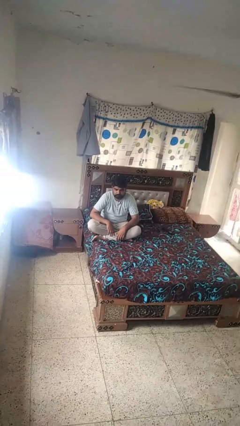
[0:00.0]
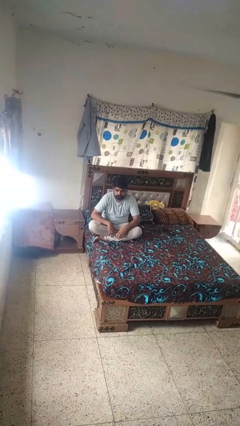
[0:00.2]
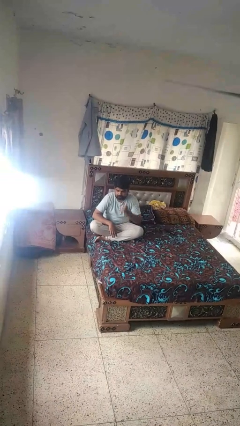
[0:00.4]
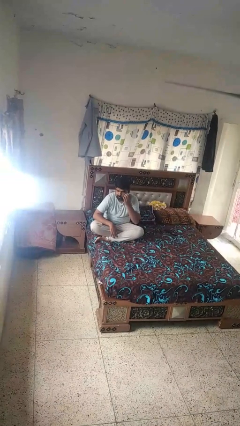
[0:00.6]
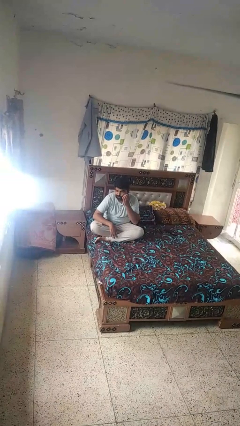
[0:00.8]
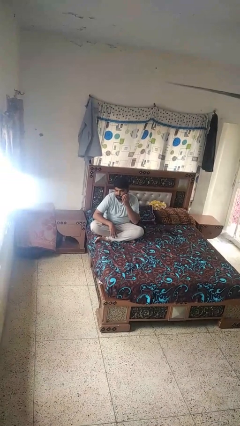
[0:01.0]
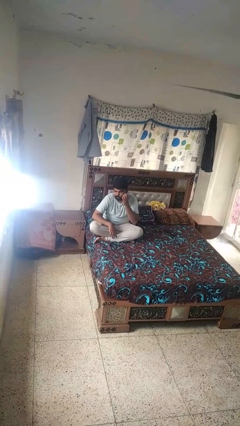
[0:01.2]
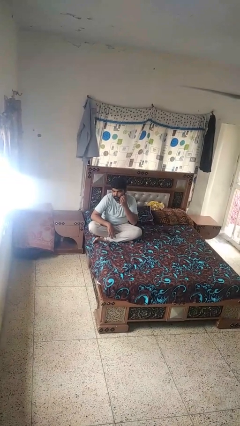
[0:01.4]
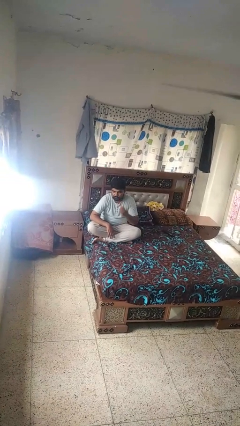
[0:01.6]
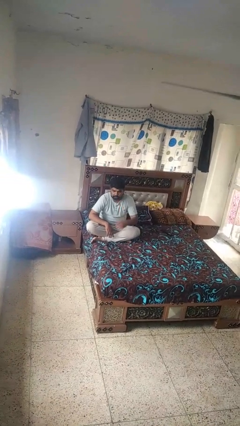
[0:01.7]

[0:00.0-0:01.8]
person scratches face

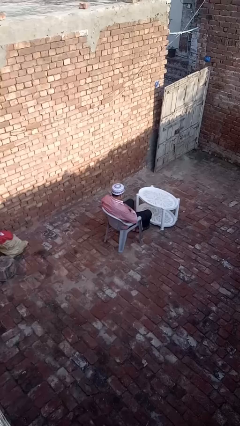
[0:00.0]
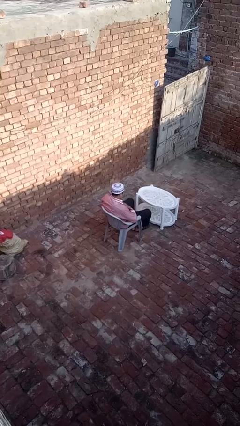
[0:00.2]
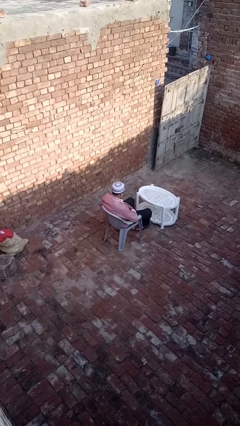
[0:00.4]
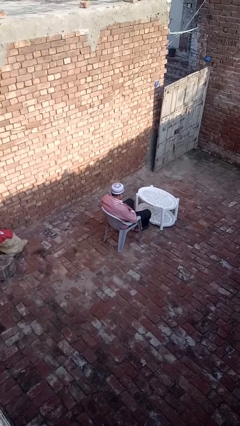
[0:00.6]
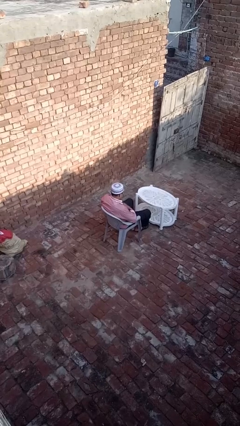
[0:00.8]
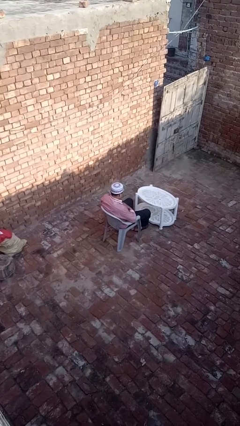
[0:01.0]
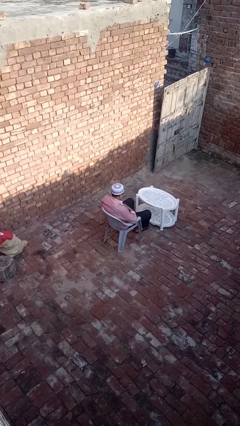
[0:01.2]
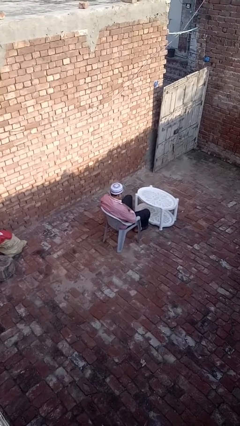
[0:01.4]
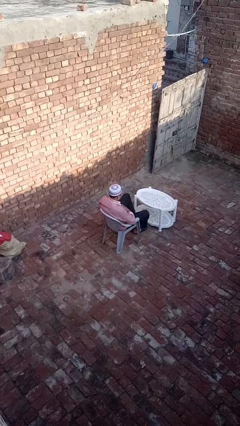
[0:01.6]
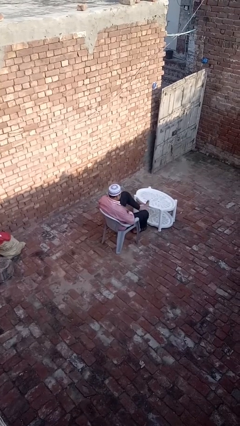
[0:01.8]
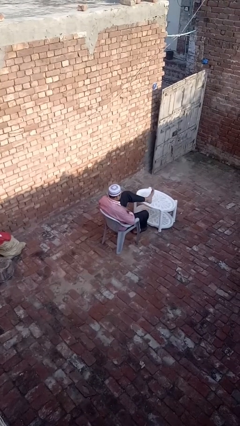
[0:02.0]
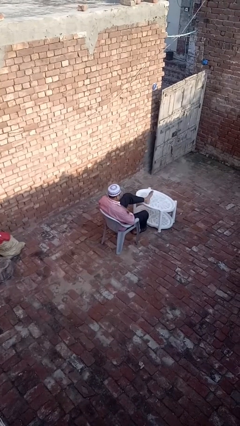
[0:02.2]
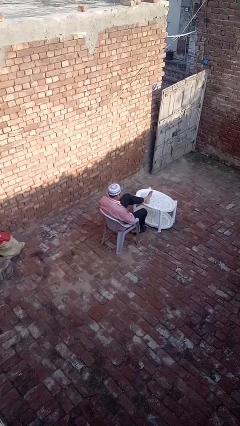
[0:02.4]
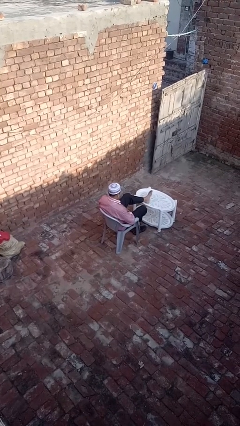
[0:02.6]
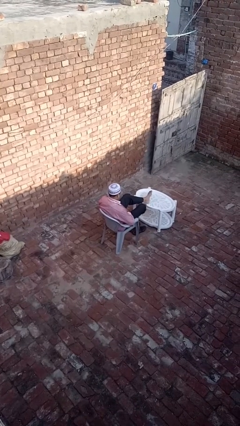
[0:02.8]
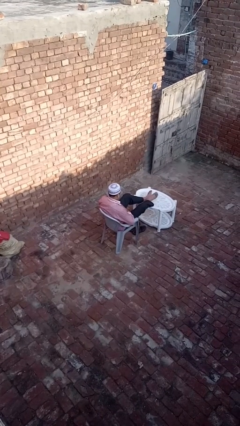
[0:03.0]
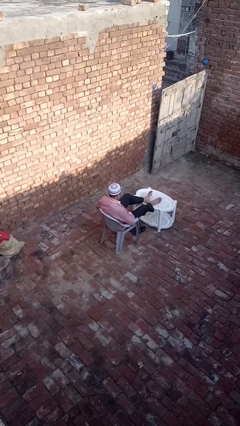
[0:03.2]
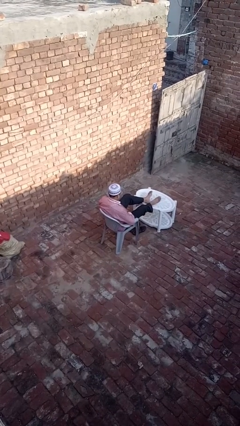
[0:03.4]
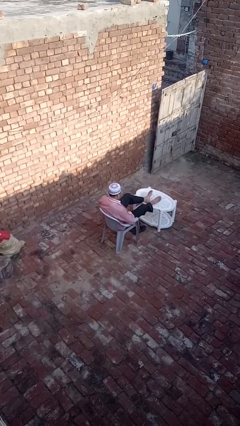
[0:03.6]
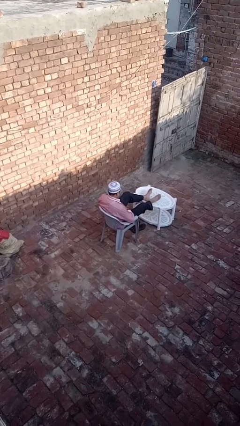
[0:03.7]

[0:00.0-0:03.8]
person puts feet up

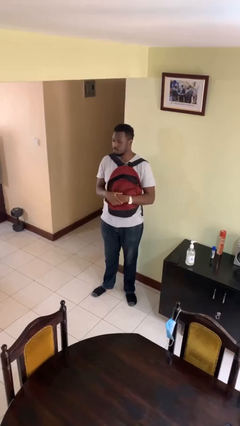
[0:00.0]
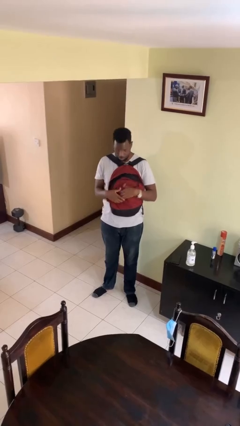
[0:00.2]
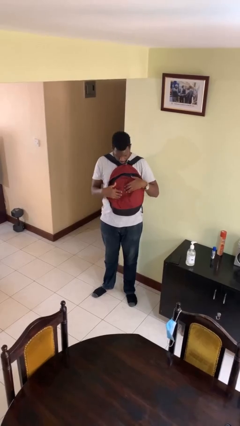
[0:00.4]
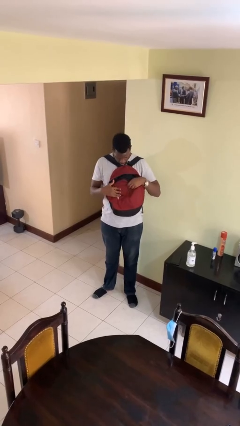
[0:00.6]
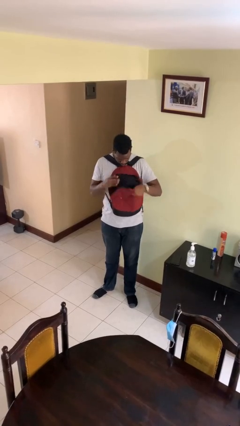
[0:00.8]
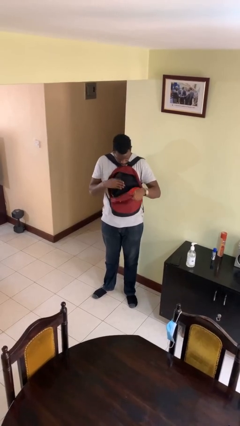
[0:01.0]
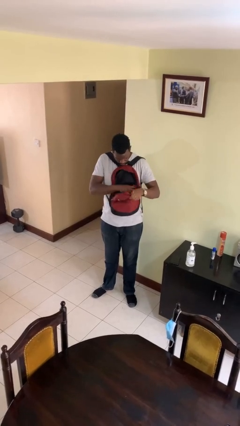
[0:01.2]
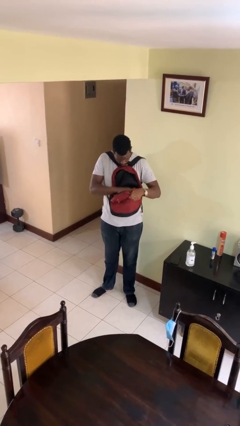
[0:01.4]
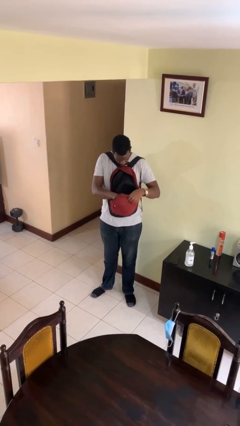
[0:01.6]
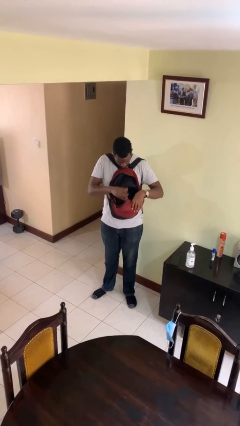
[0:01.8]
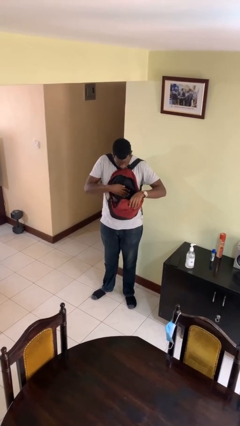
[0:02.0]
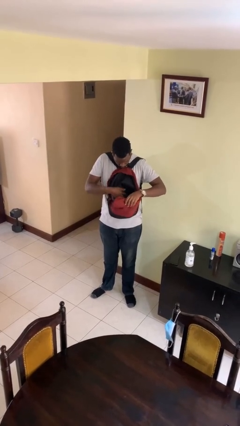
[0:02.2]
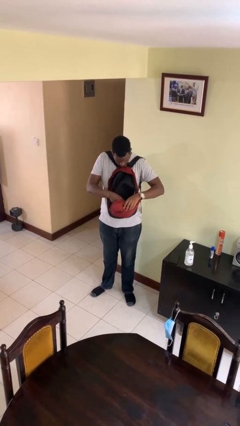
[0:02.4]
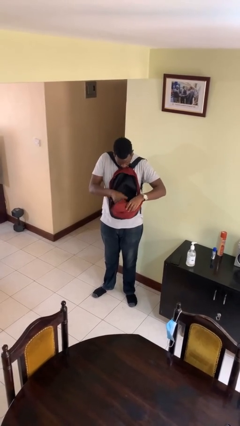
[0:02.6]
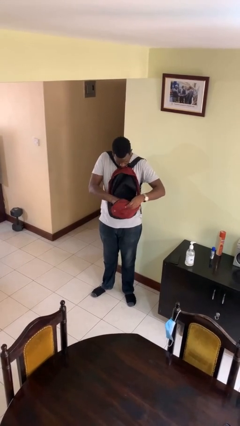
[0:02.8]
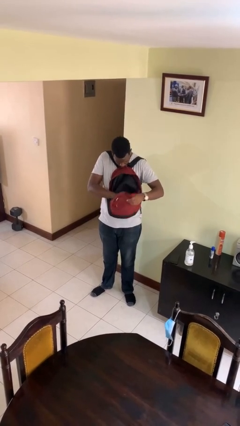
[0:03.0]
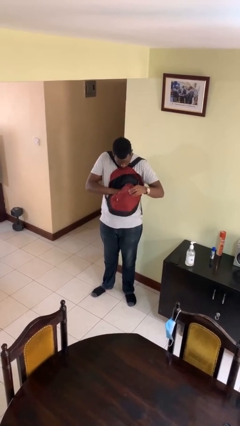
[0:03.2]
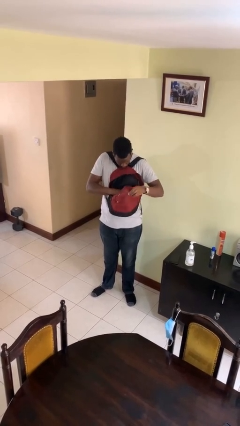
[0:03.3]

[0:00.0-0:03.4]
person searches in backpack

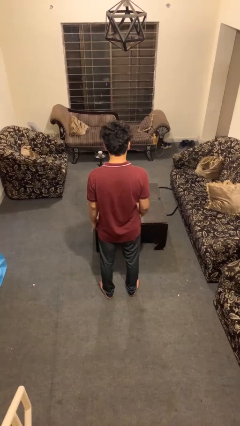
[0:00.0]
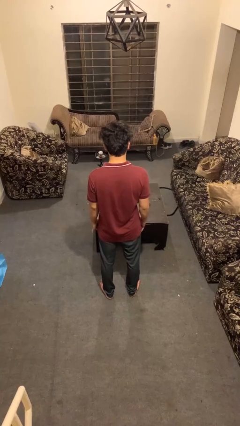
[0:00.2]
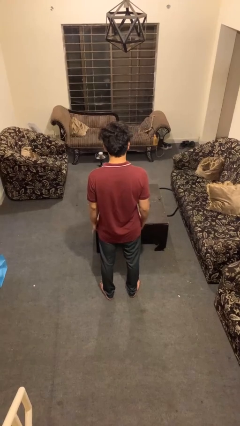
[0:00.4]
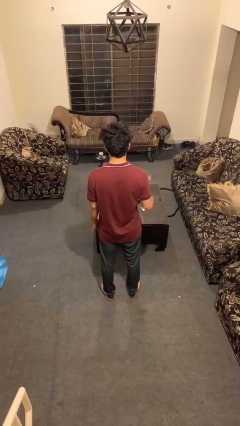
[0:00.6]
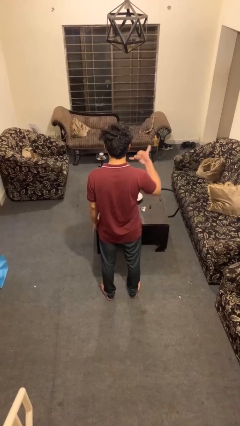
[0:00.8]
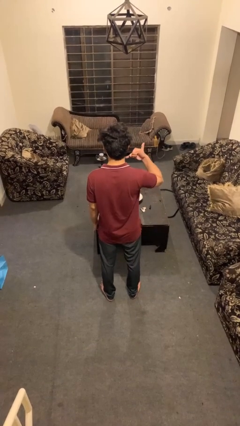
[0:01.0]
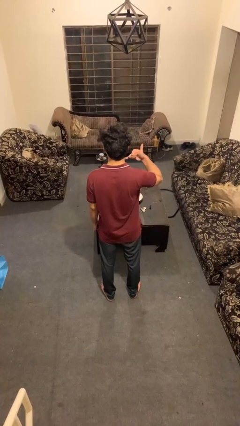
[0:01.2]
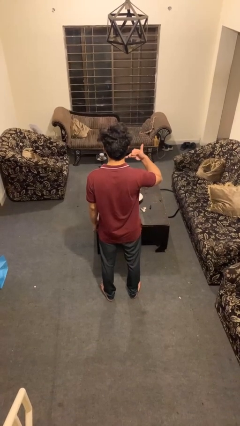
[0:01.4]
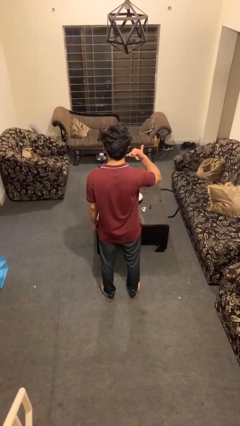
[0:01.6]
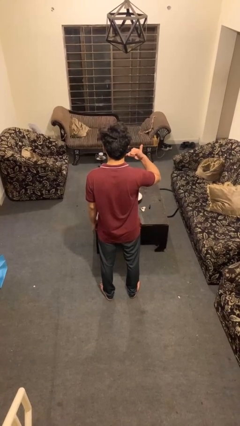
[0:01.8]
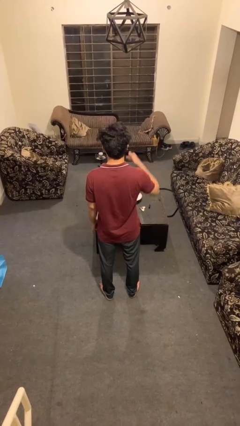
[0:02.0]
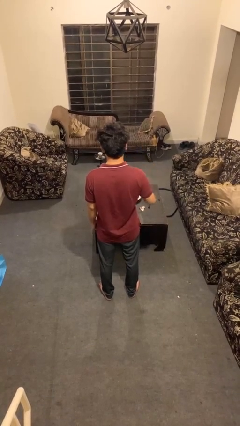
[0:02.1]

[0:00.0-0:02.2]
person gestures call me

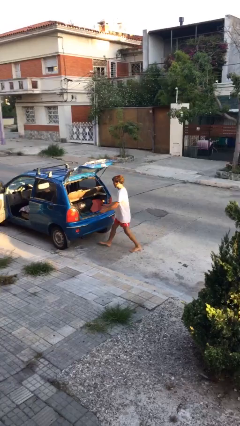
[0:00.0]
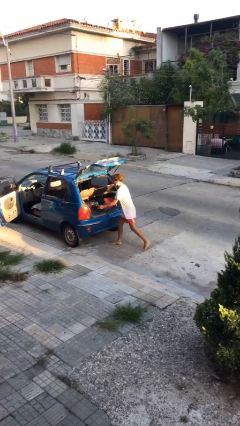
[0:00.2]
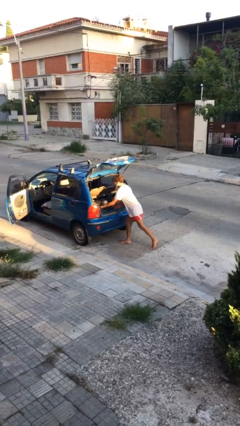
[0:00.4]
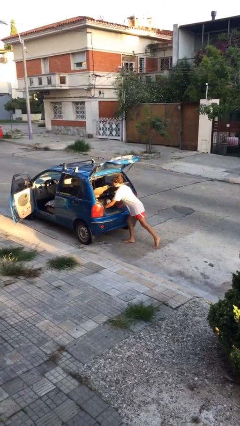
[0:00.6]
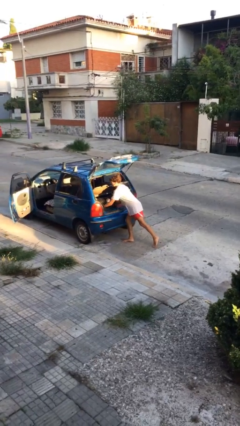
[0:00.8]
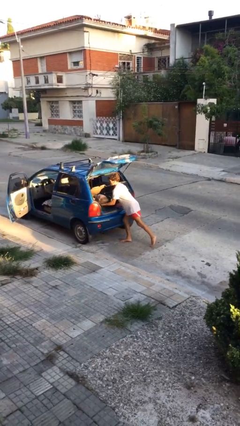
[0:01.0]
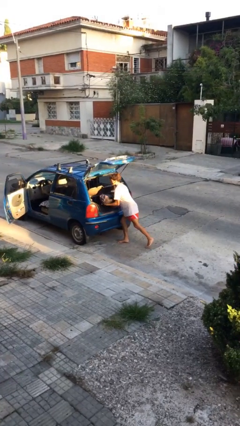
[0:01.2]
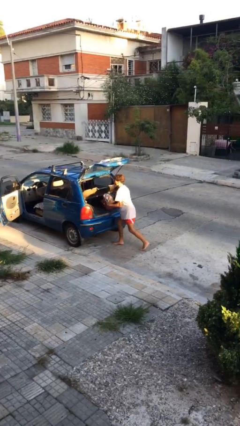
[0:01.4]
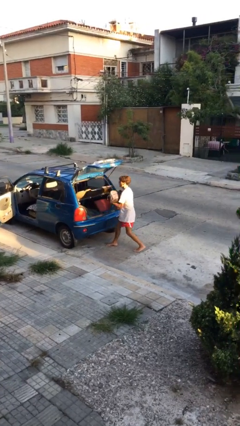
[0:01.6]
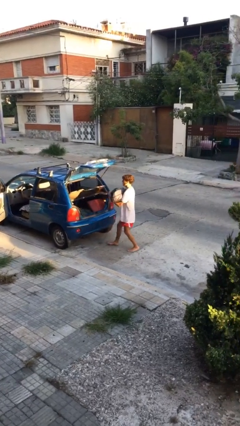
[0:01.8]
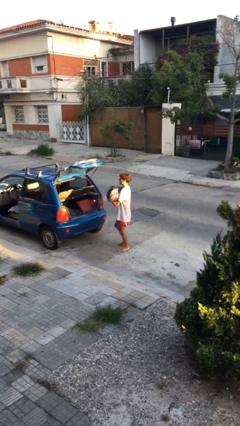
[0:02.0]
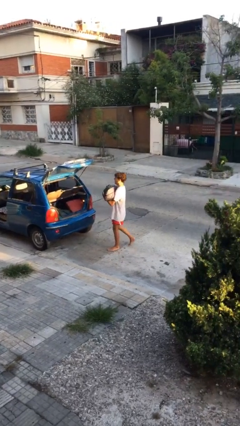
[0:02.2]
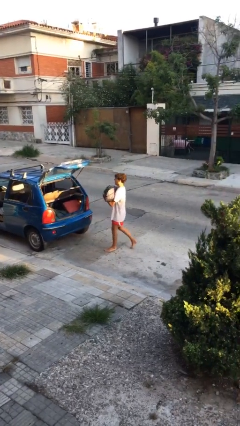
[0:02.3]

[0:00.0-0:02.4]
person unloads car

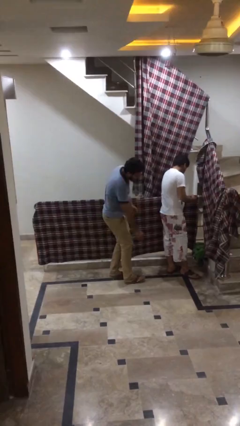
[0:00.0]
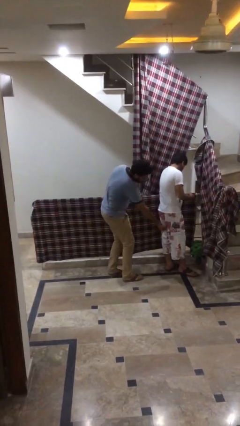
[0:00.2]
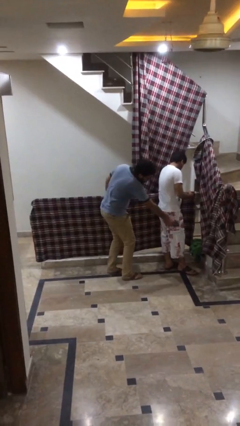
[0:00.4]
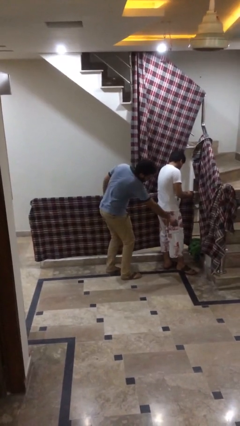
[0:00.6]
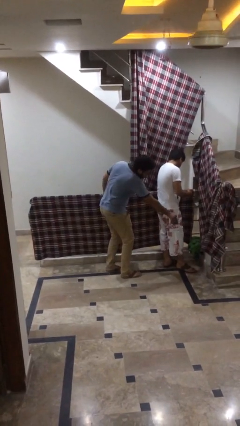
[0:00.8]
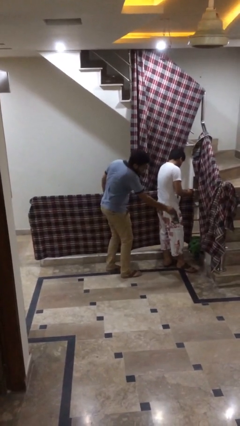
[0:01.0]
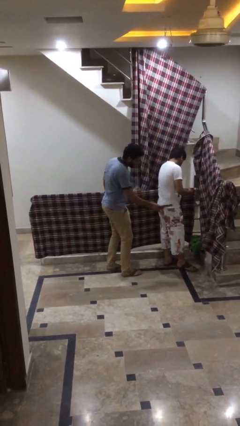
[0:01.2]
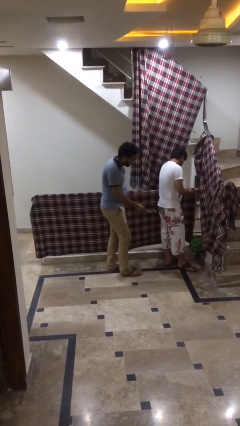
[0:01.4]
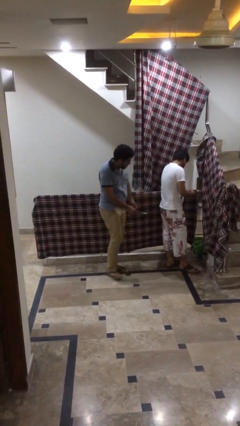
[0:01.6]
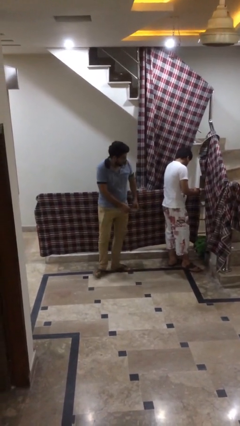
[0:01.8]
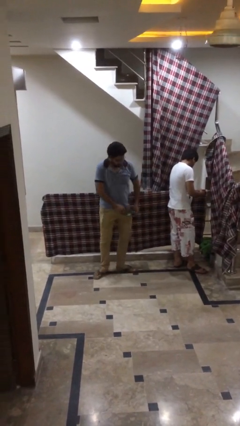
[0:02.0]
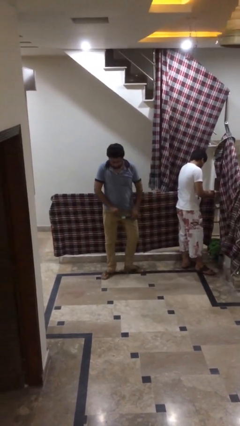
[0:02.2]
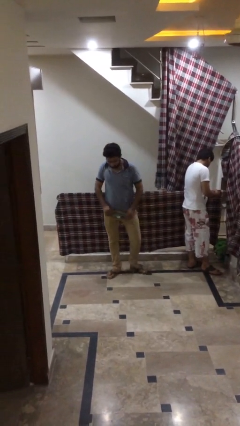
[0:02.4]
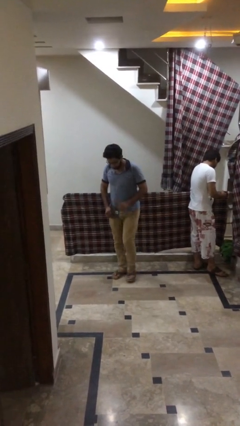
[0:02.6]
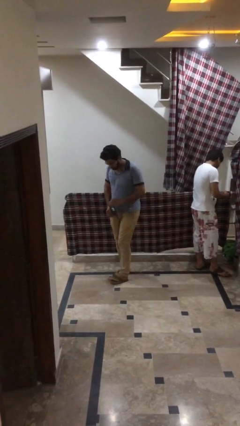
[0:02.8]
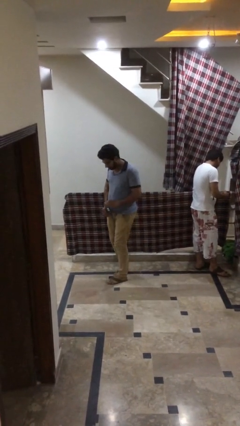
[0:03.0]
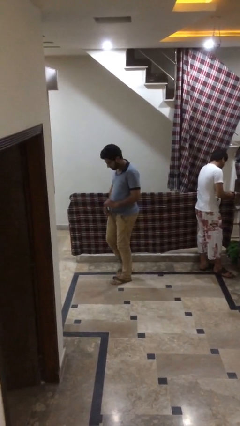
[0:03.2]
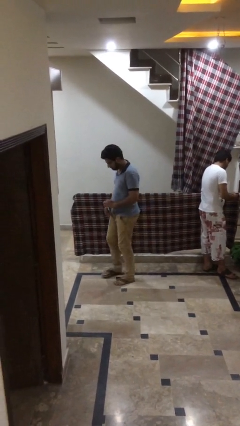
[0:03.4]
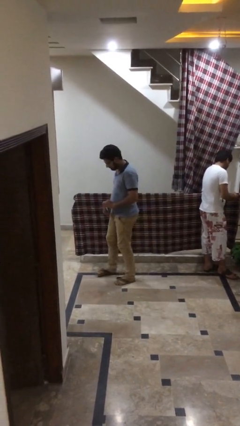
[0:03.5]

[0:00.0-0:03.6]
person steals object from person

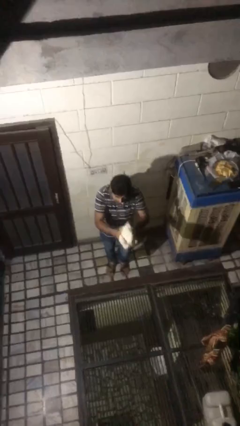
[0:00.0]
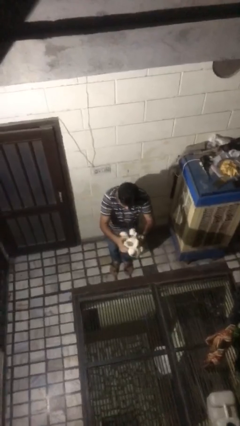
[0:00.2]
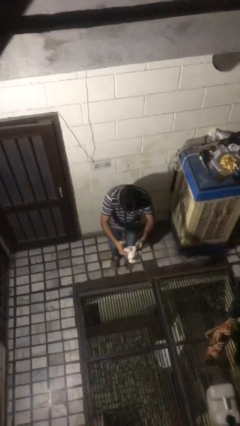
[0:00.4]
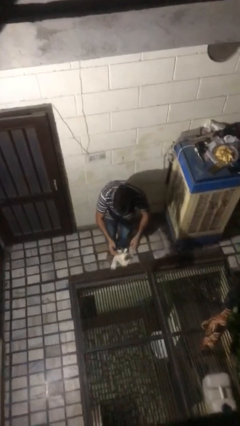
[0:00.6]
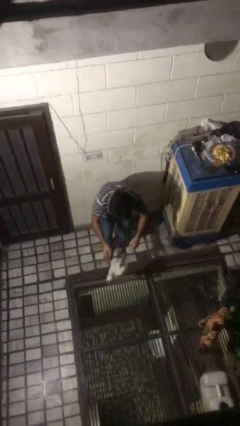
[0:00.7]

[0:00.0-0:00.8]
person catches dropped object
